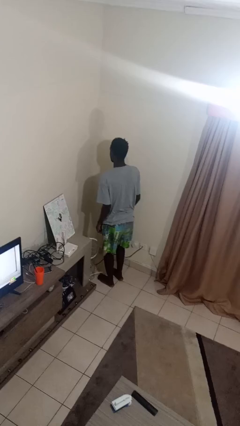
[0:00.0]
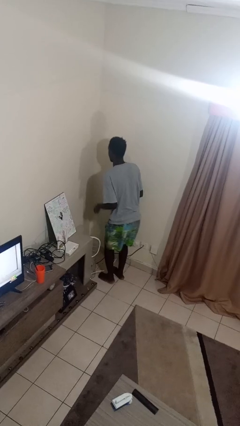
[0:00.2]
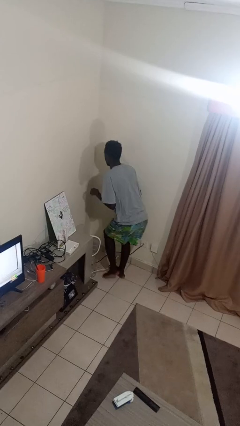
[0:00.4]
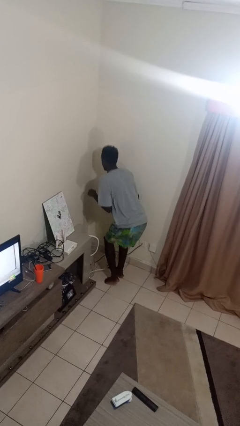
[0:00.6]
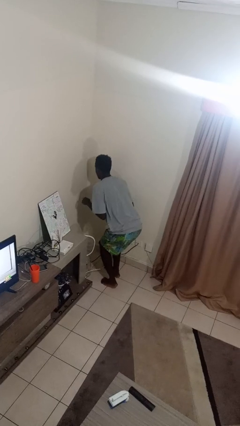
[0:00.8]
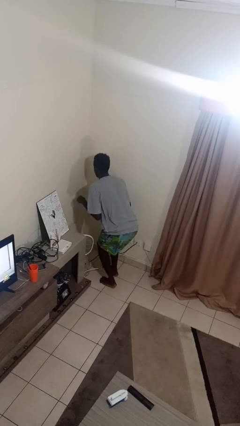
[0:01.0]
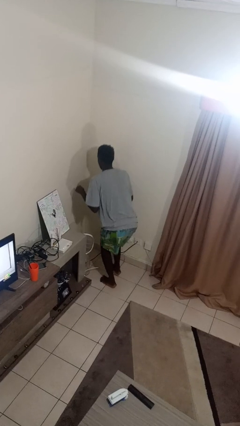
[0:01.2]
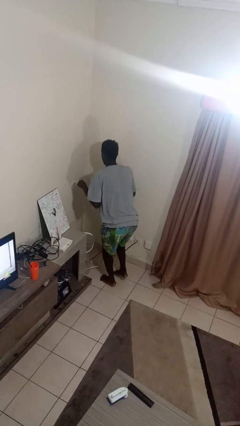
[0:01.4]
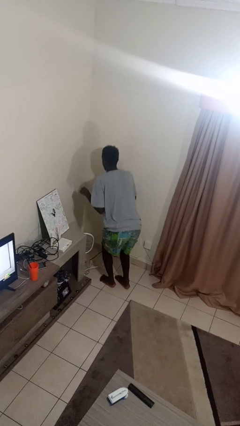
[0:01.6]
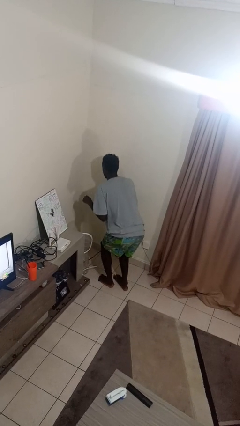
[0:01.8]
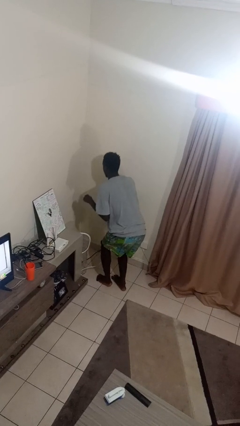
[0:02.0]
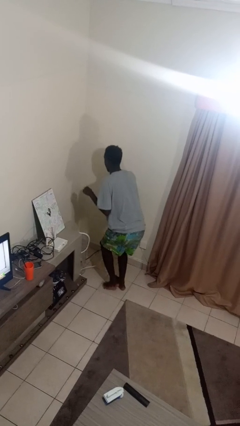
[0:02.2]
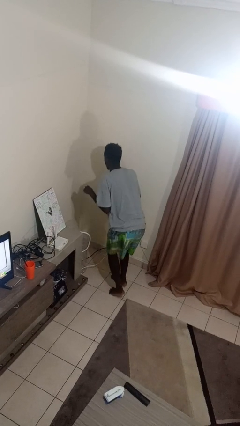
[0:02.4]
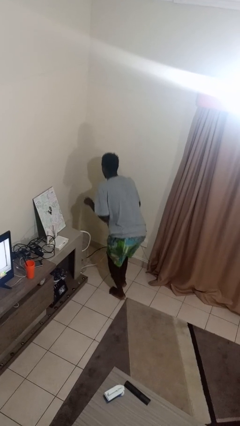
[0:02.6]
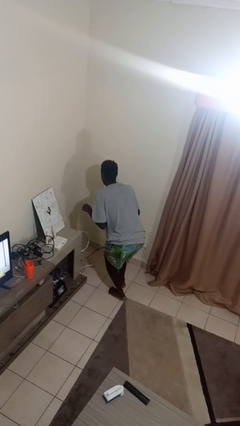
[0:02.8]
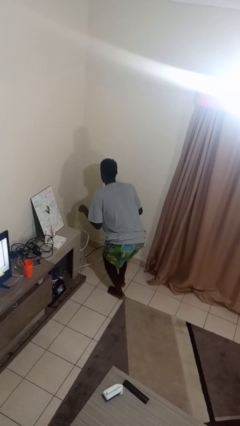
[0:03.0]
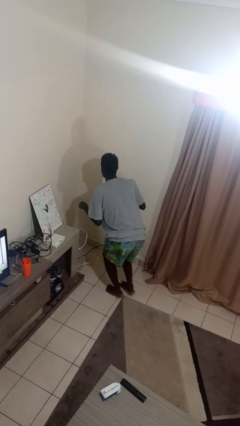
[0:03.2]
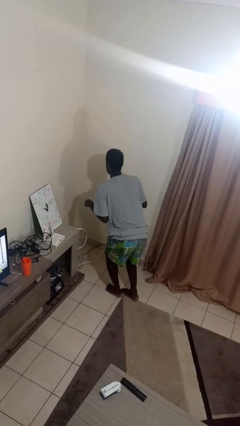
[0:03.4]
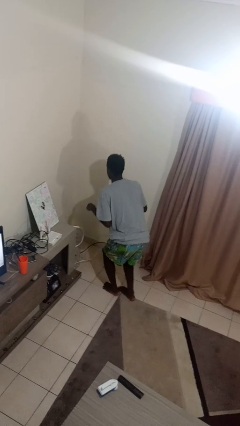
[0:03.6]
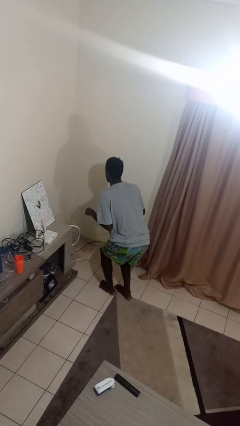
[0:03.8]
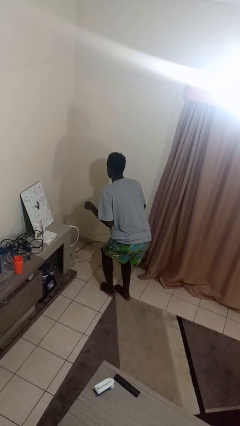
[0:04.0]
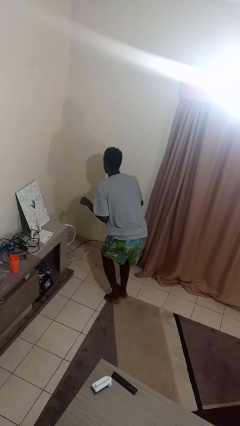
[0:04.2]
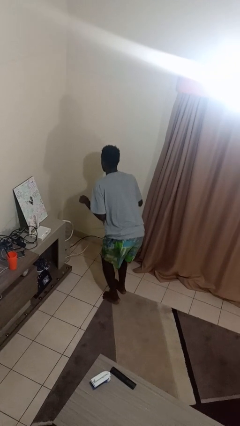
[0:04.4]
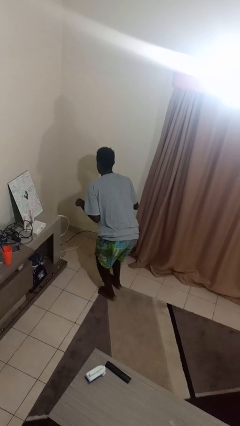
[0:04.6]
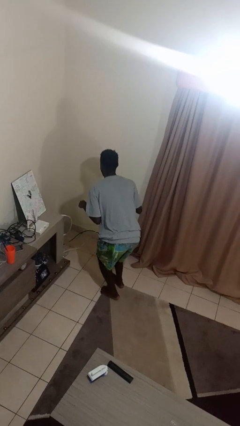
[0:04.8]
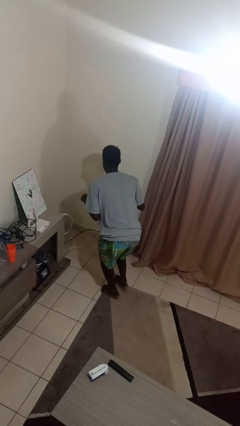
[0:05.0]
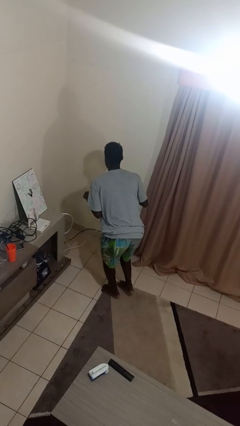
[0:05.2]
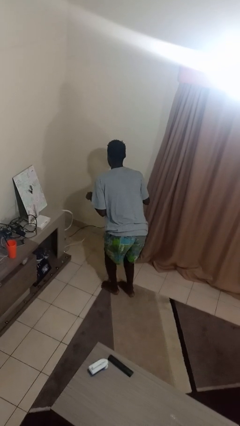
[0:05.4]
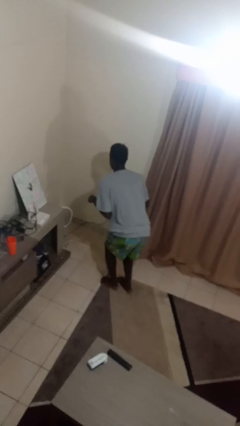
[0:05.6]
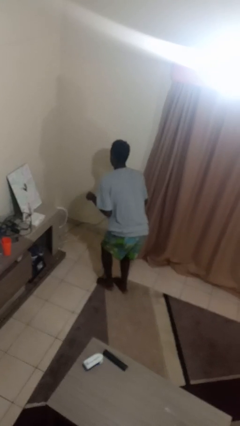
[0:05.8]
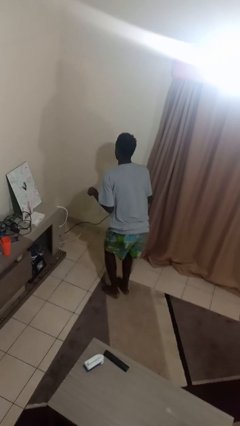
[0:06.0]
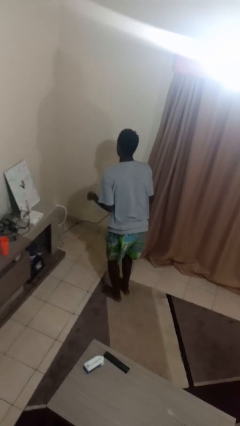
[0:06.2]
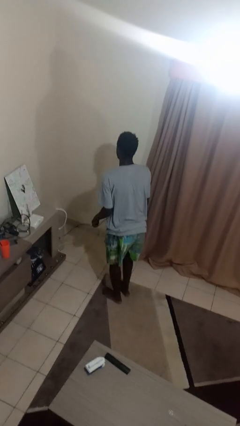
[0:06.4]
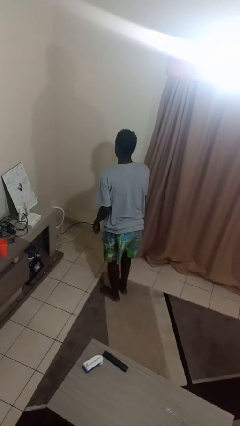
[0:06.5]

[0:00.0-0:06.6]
person walks tiptoe

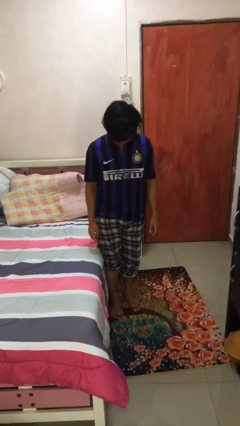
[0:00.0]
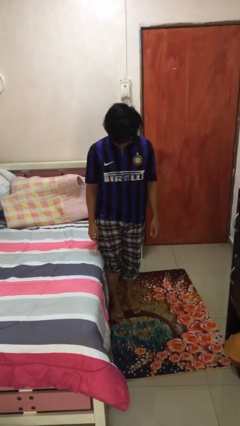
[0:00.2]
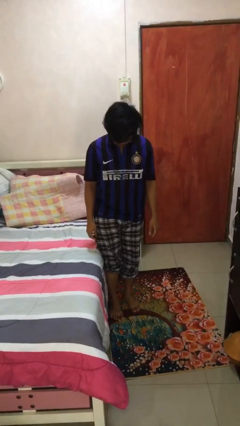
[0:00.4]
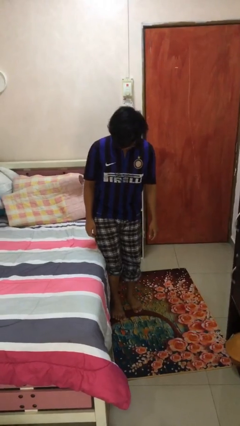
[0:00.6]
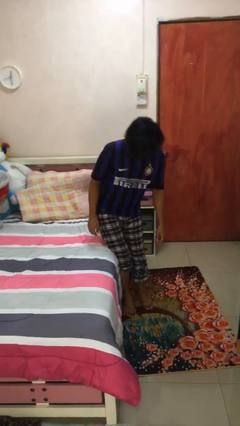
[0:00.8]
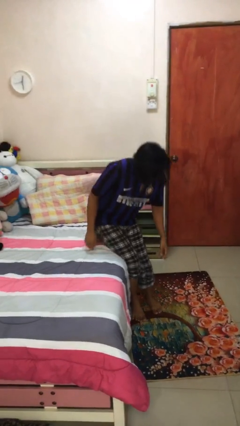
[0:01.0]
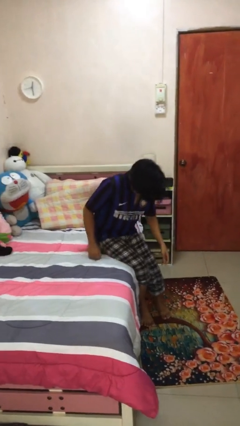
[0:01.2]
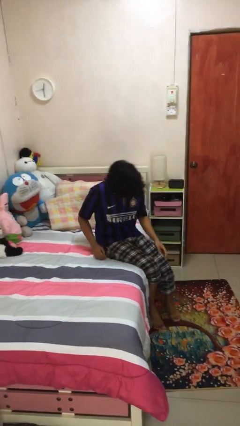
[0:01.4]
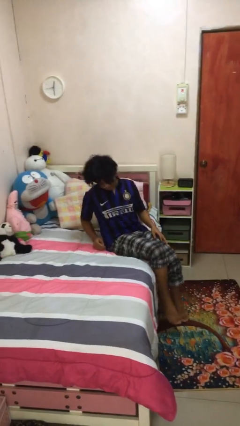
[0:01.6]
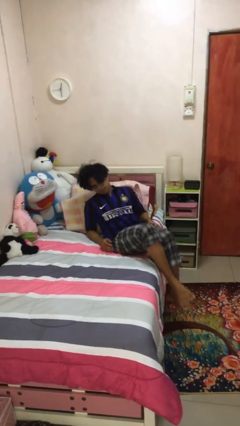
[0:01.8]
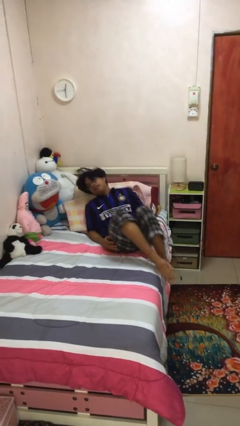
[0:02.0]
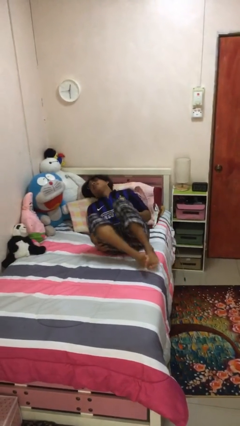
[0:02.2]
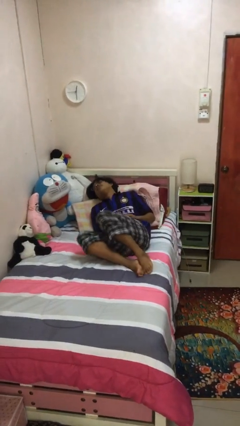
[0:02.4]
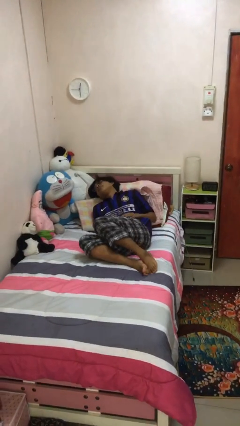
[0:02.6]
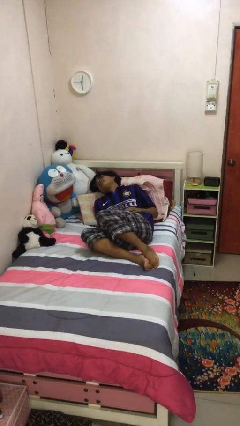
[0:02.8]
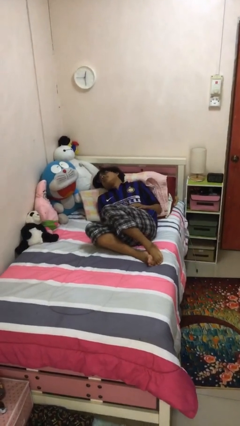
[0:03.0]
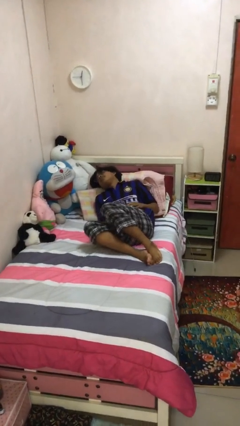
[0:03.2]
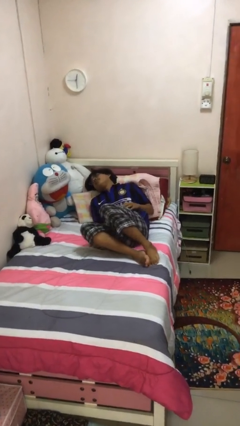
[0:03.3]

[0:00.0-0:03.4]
person lies down on bed

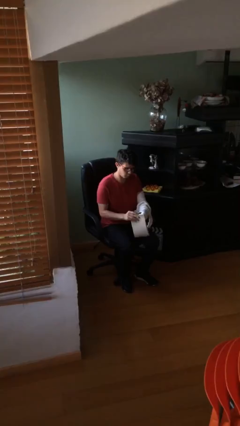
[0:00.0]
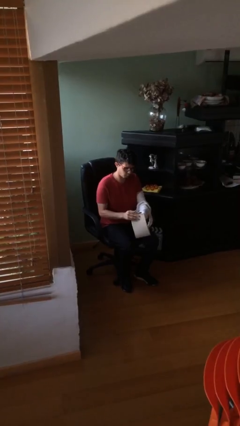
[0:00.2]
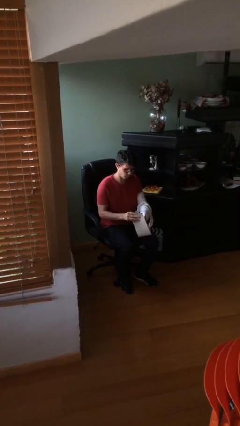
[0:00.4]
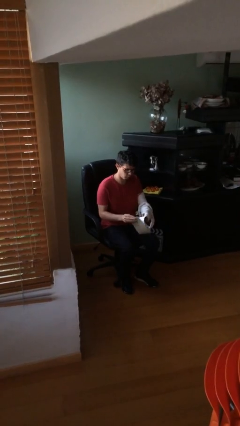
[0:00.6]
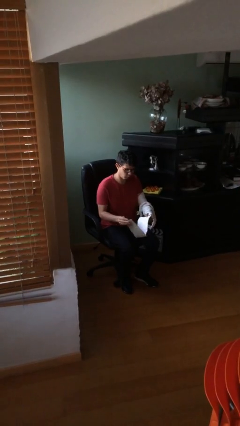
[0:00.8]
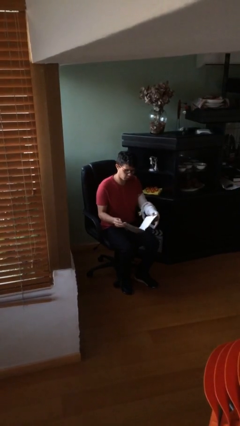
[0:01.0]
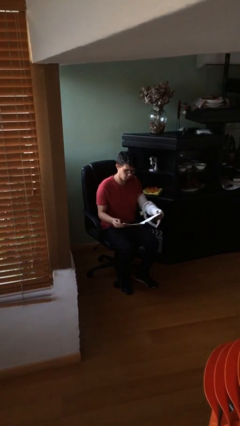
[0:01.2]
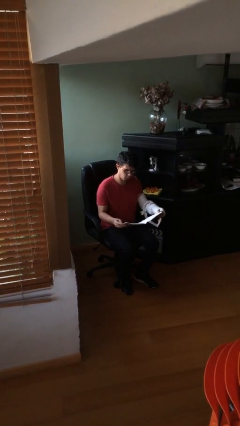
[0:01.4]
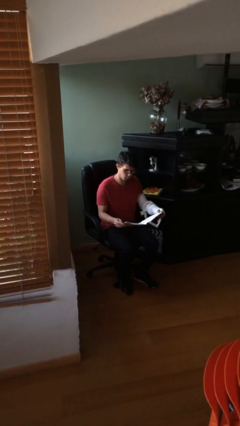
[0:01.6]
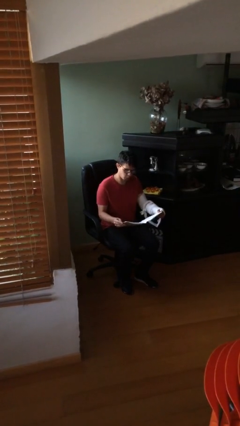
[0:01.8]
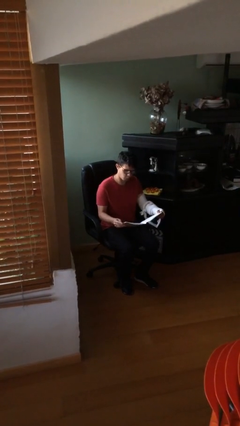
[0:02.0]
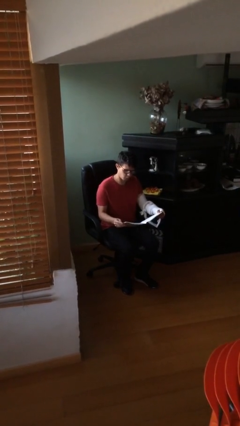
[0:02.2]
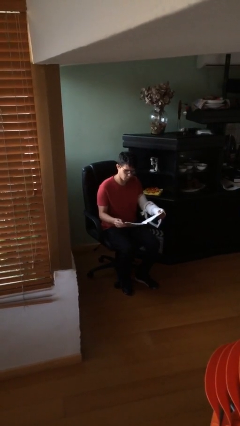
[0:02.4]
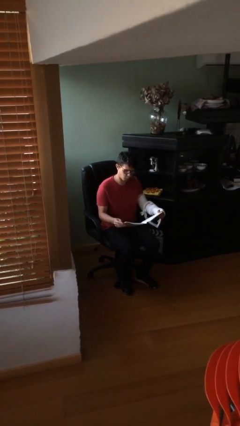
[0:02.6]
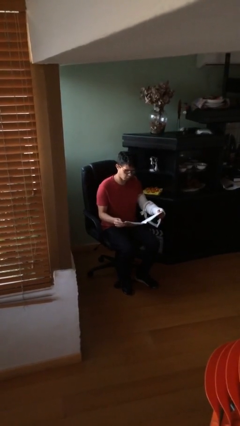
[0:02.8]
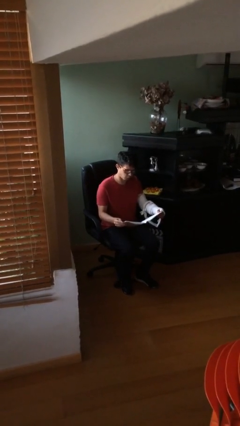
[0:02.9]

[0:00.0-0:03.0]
person reads document

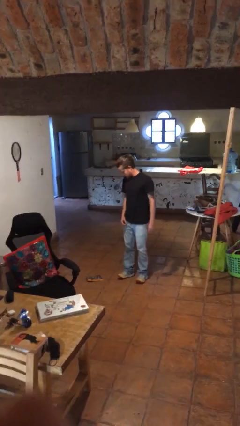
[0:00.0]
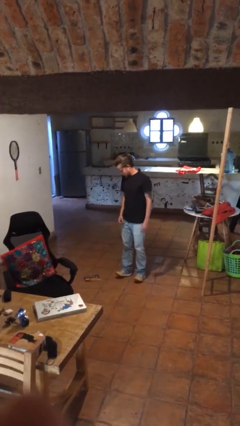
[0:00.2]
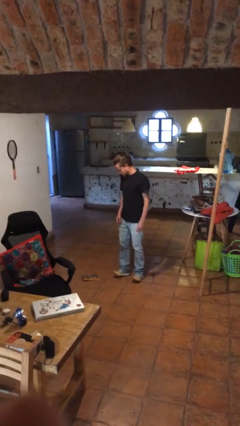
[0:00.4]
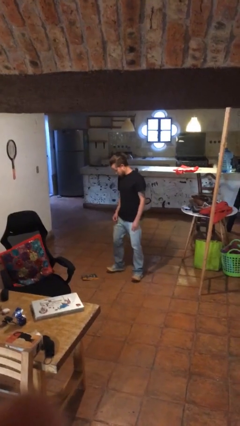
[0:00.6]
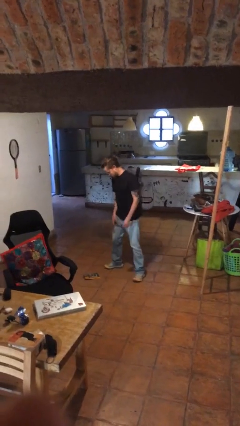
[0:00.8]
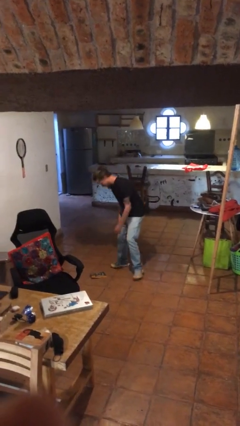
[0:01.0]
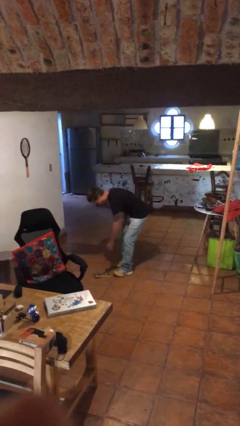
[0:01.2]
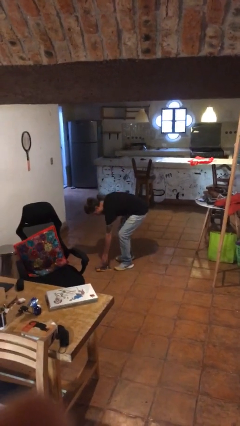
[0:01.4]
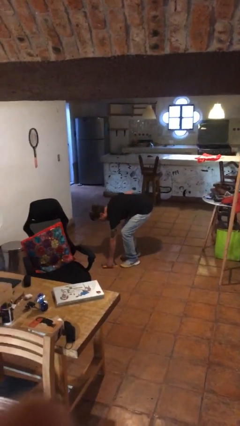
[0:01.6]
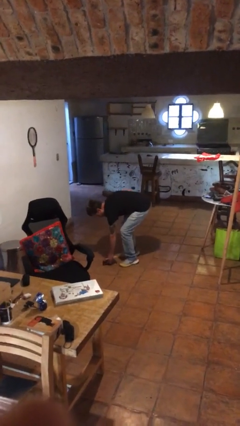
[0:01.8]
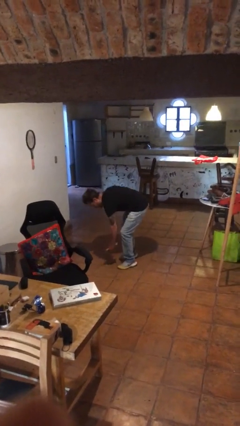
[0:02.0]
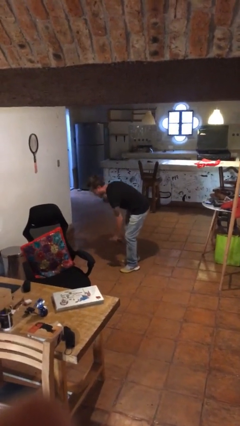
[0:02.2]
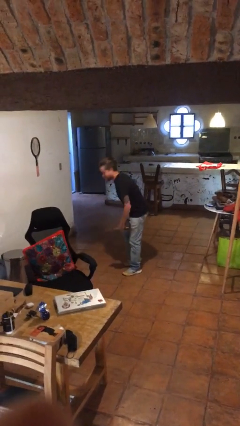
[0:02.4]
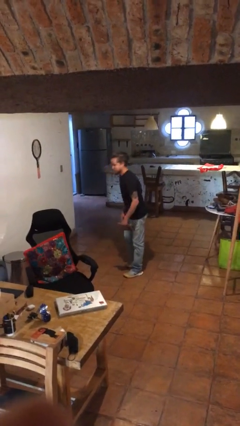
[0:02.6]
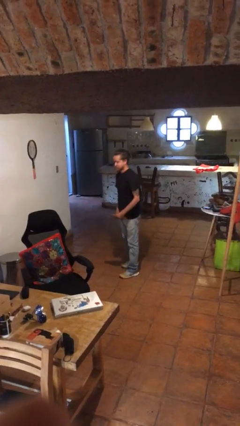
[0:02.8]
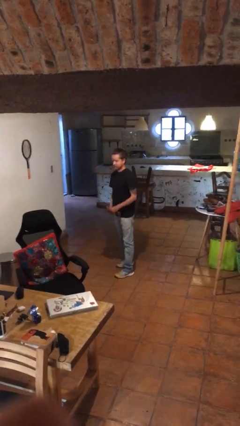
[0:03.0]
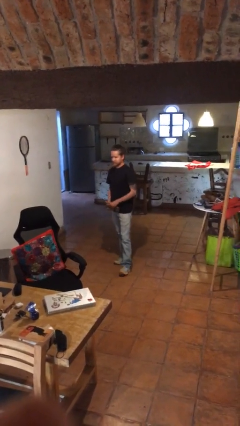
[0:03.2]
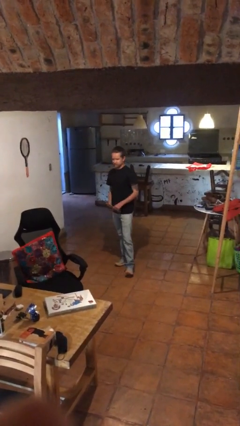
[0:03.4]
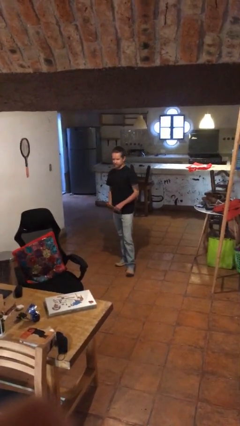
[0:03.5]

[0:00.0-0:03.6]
person picks up object from floor

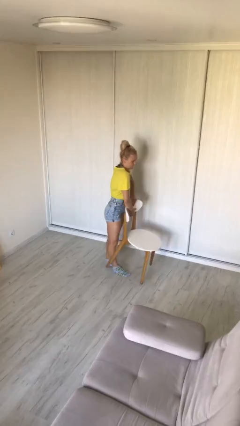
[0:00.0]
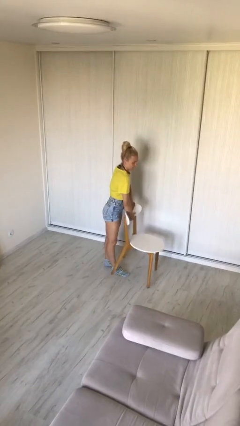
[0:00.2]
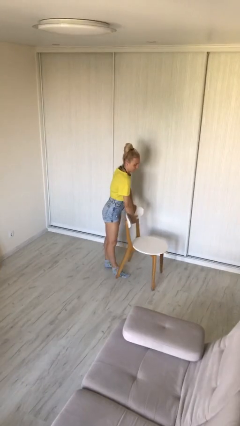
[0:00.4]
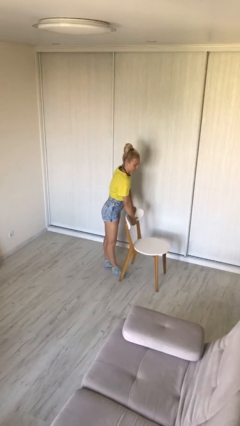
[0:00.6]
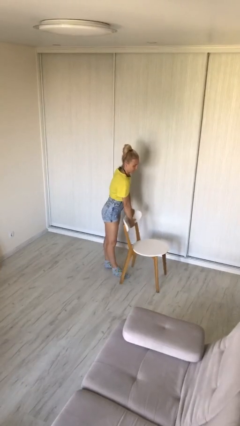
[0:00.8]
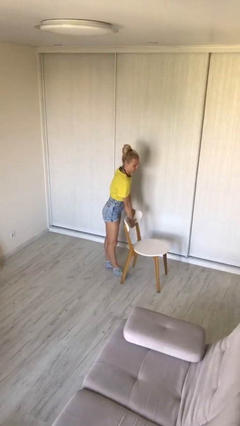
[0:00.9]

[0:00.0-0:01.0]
person puts down object on floor
